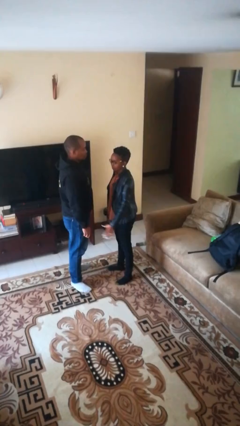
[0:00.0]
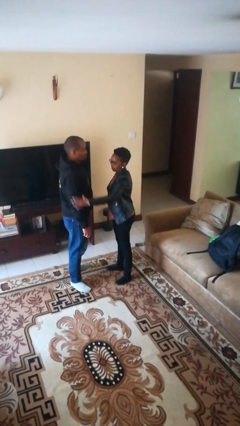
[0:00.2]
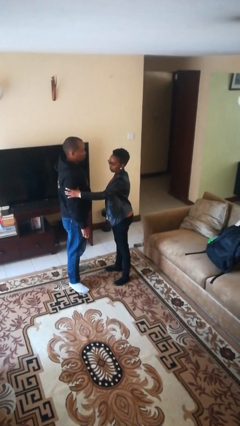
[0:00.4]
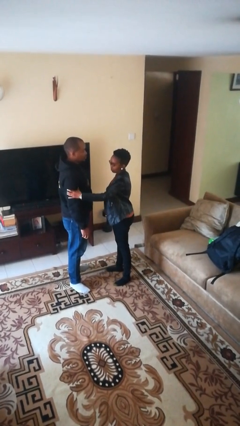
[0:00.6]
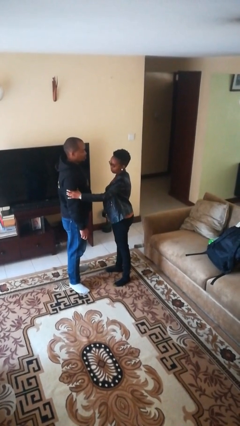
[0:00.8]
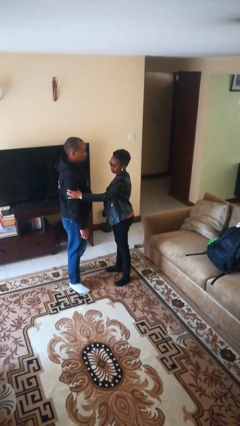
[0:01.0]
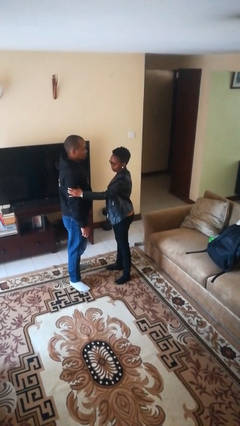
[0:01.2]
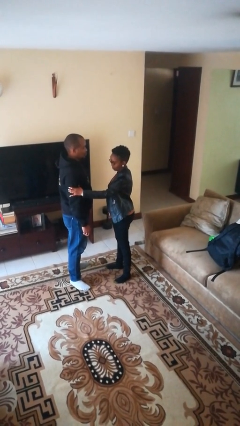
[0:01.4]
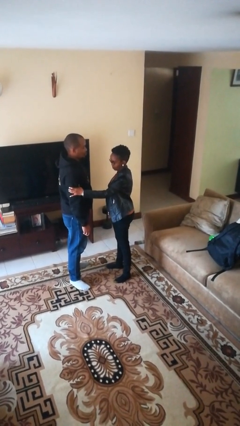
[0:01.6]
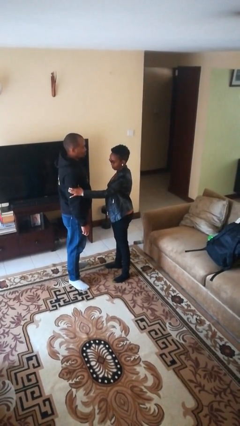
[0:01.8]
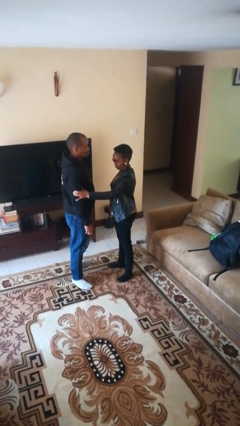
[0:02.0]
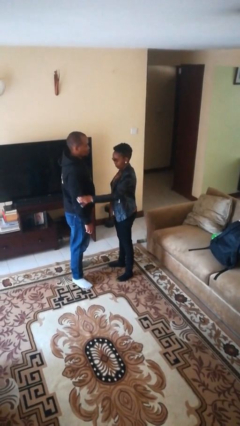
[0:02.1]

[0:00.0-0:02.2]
person grabs person by bicep

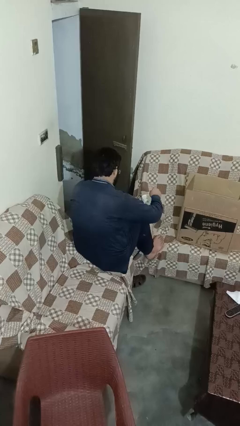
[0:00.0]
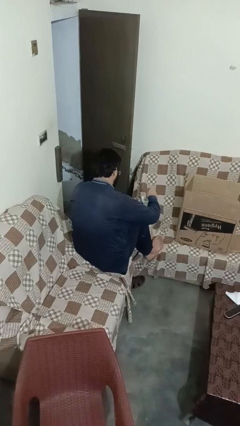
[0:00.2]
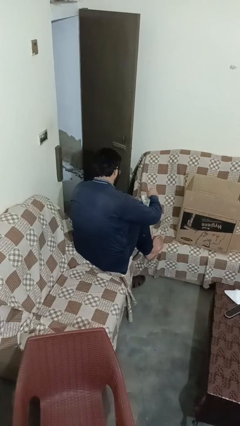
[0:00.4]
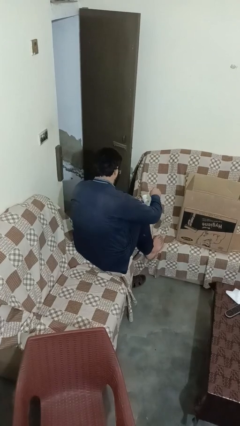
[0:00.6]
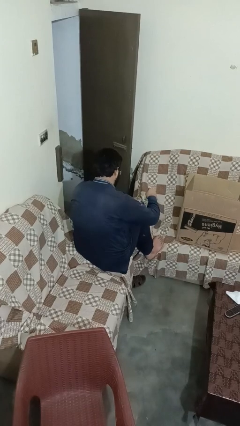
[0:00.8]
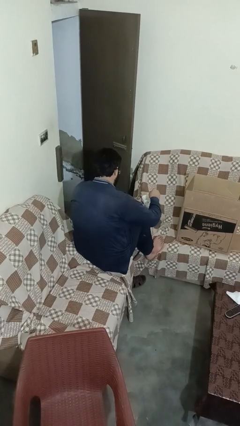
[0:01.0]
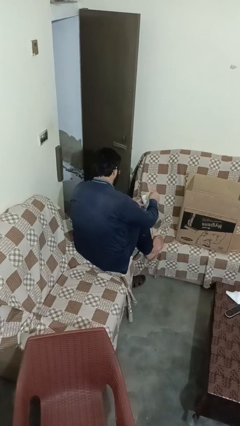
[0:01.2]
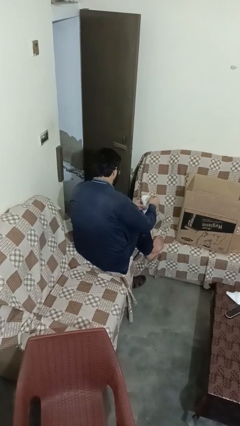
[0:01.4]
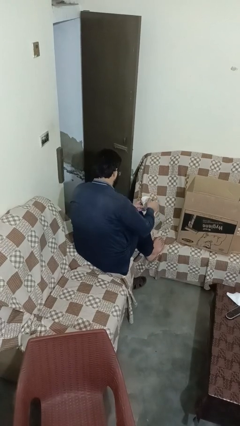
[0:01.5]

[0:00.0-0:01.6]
person stirs mug

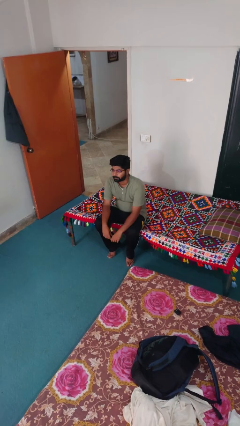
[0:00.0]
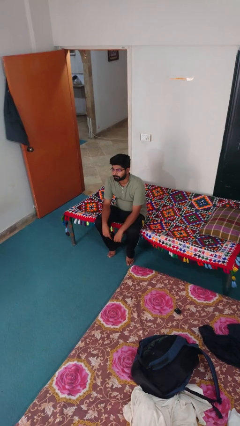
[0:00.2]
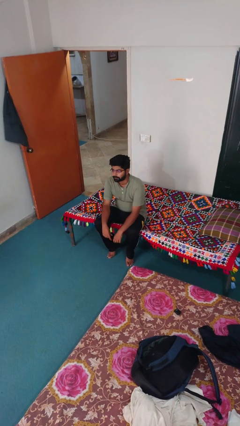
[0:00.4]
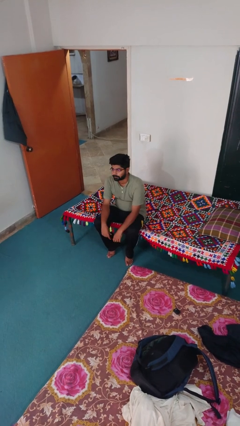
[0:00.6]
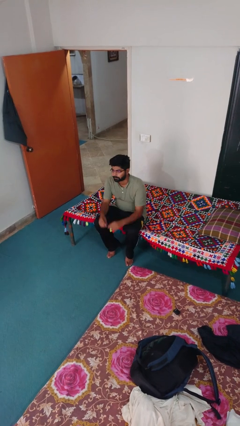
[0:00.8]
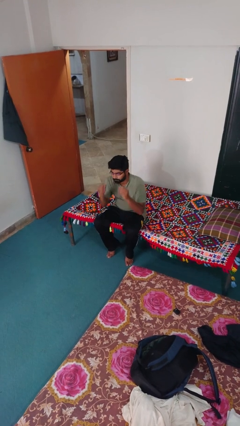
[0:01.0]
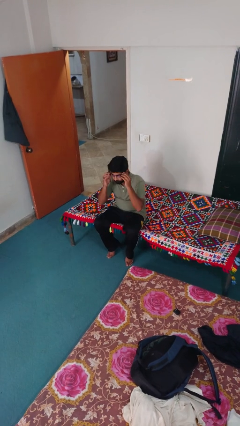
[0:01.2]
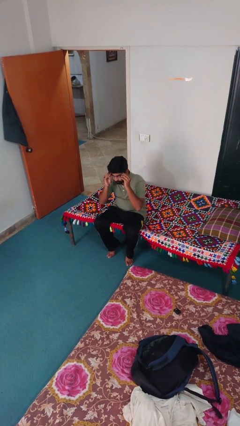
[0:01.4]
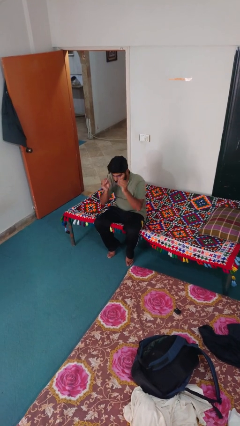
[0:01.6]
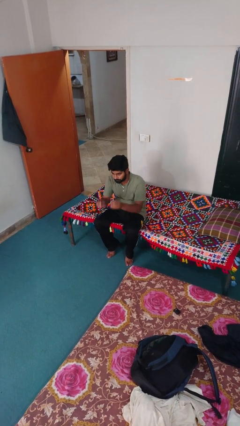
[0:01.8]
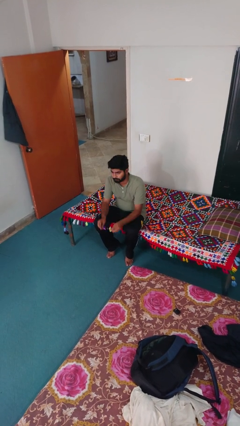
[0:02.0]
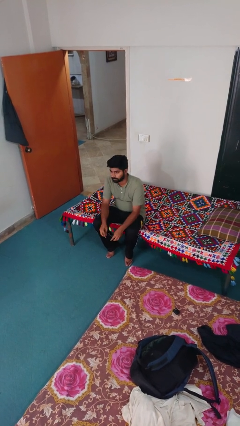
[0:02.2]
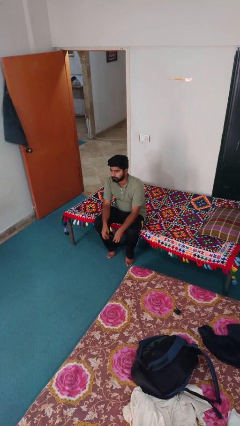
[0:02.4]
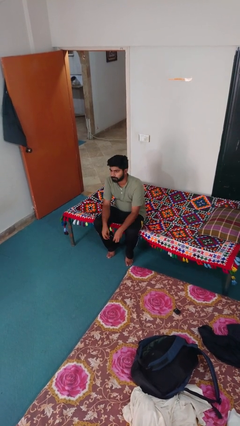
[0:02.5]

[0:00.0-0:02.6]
person takes off glasses

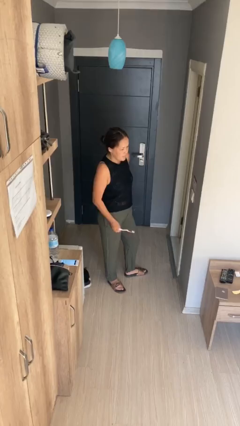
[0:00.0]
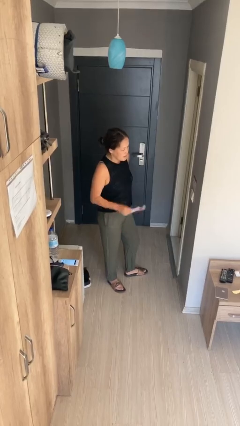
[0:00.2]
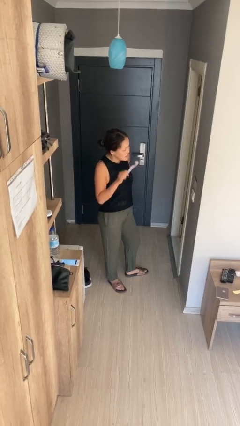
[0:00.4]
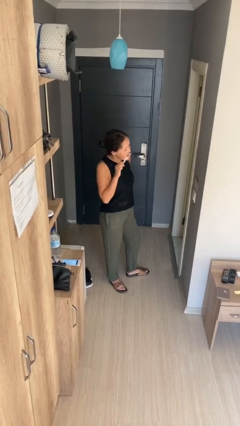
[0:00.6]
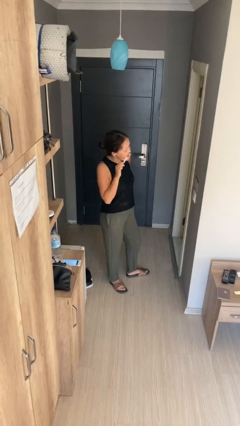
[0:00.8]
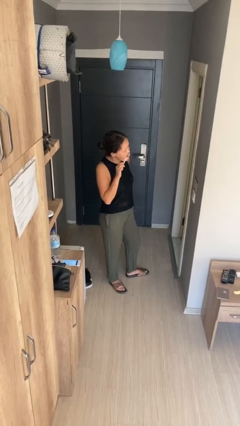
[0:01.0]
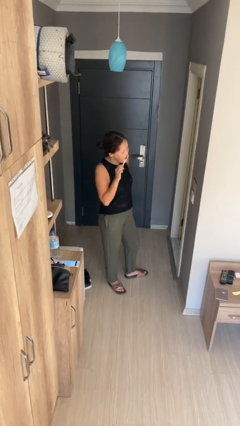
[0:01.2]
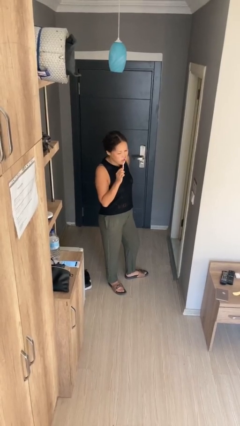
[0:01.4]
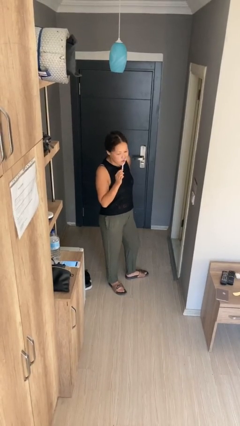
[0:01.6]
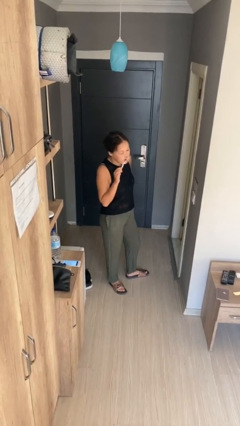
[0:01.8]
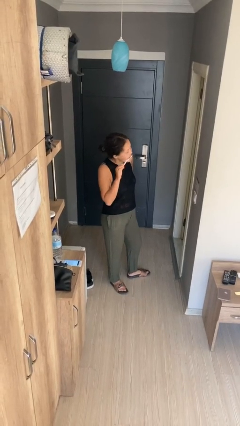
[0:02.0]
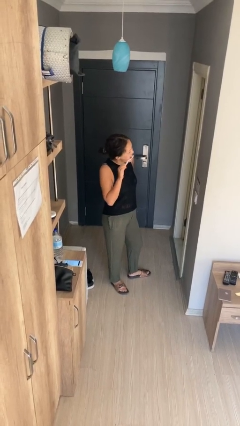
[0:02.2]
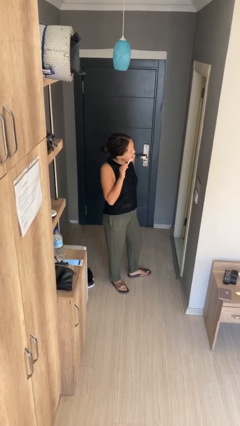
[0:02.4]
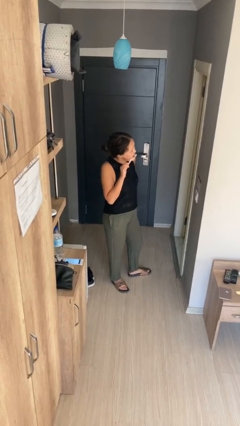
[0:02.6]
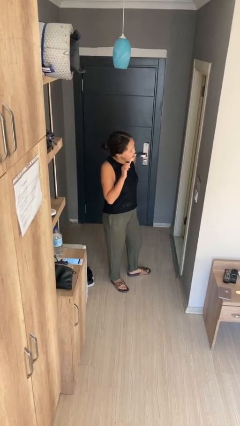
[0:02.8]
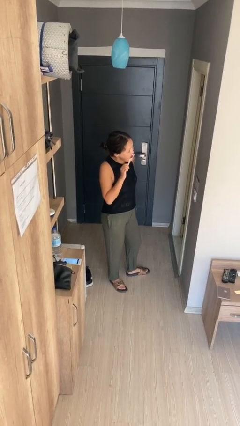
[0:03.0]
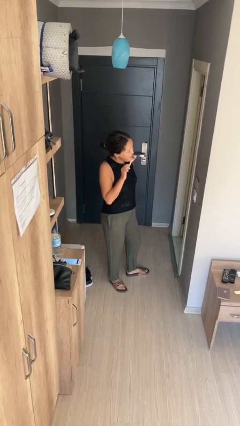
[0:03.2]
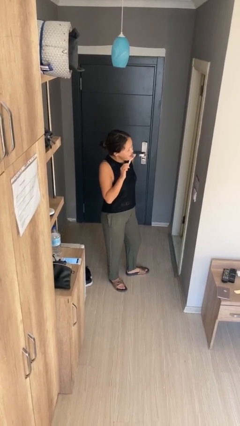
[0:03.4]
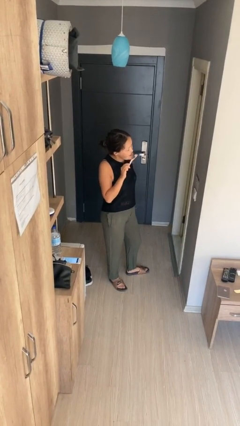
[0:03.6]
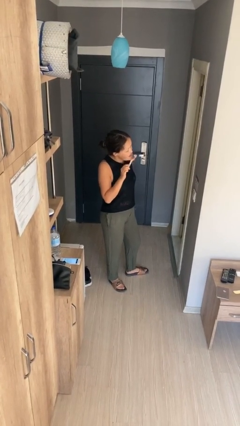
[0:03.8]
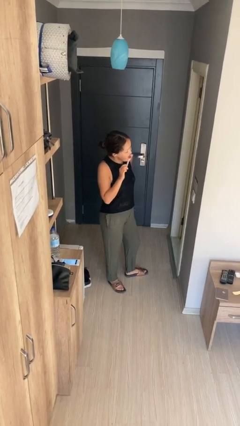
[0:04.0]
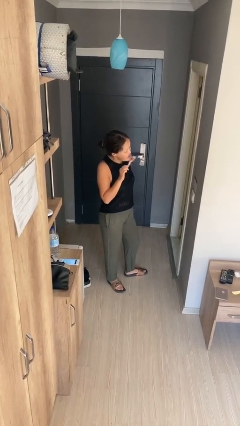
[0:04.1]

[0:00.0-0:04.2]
person brushes teeth

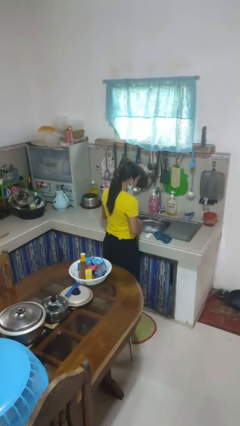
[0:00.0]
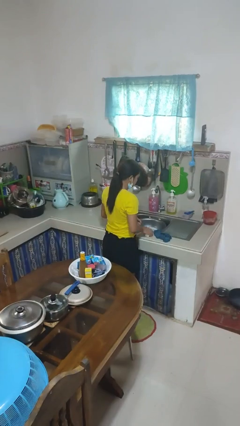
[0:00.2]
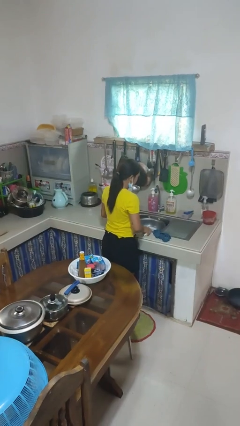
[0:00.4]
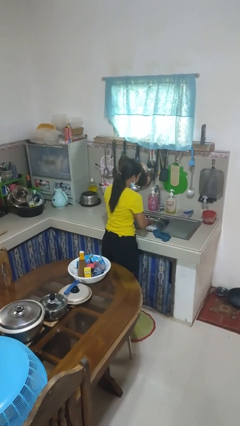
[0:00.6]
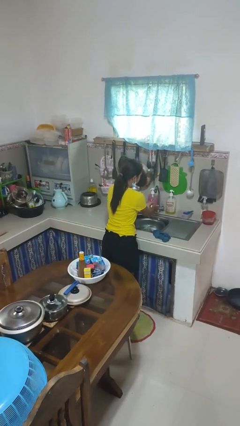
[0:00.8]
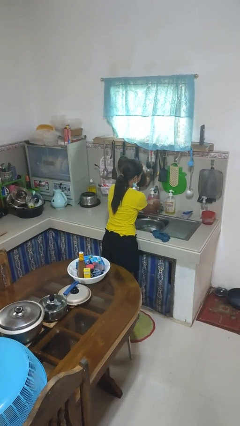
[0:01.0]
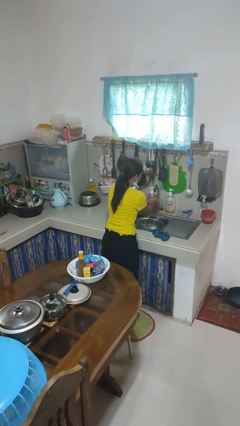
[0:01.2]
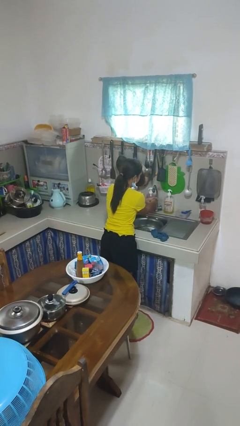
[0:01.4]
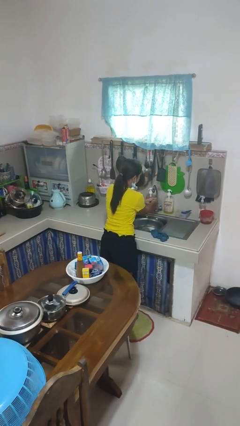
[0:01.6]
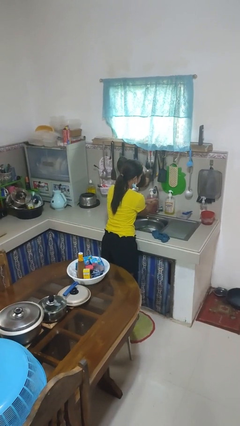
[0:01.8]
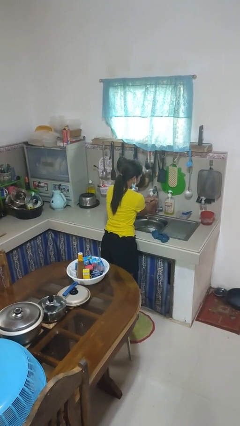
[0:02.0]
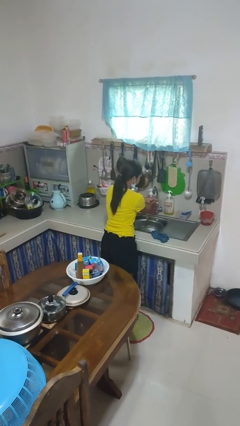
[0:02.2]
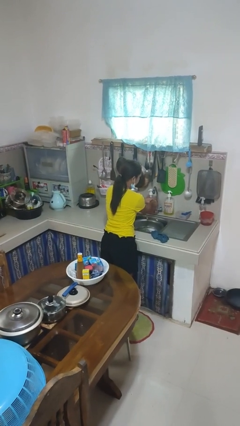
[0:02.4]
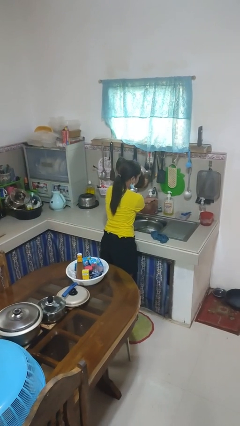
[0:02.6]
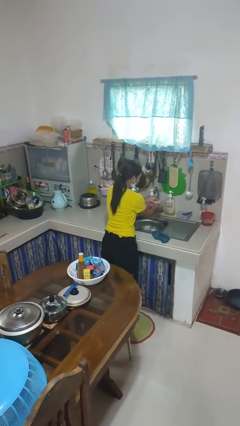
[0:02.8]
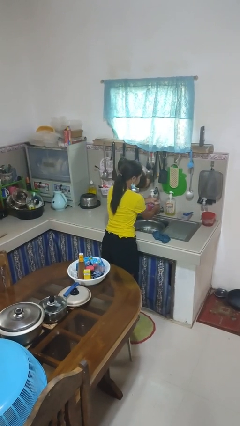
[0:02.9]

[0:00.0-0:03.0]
person washes hands

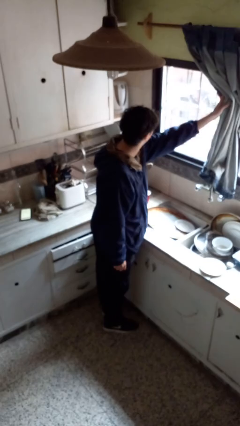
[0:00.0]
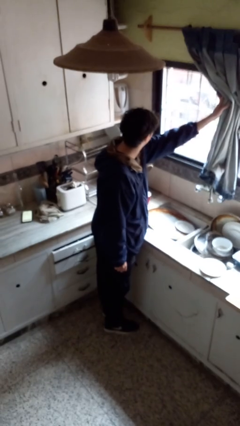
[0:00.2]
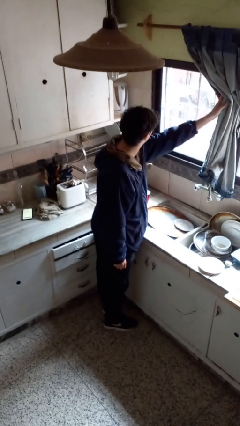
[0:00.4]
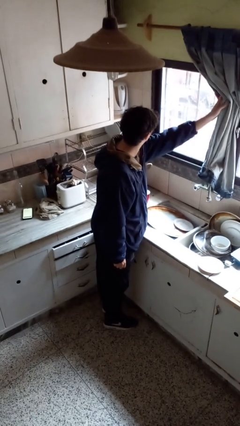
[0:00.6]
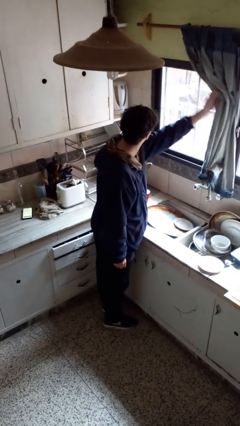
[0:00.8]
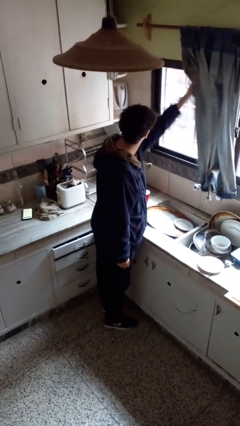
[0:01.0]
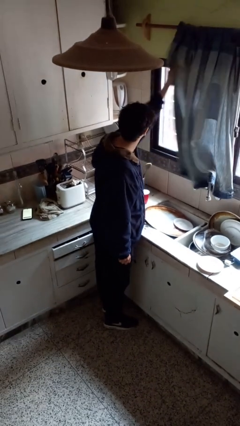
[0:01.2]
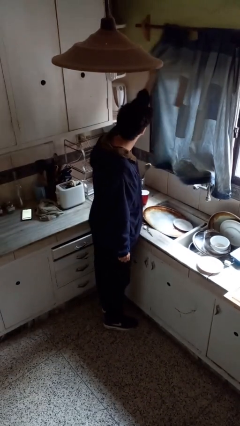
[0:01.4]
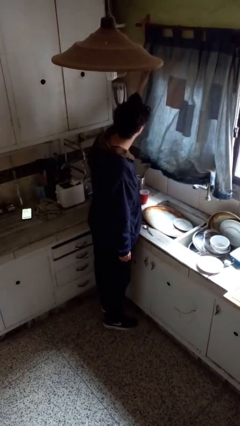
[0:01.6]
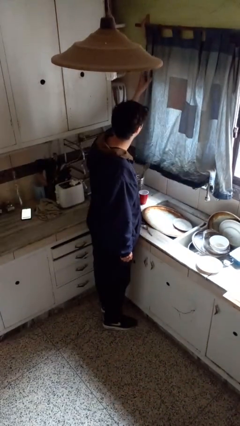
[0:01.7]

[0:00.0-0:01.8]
person closes curtains

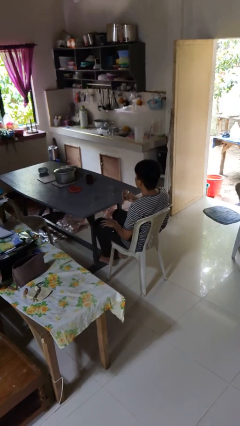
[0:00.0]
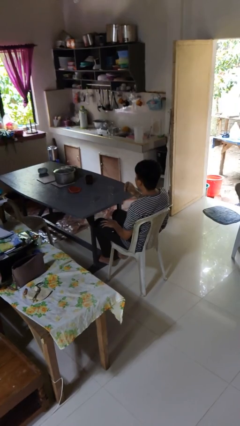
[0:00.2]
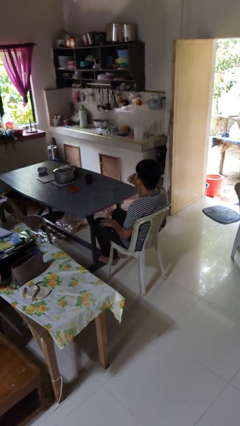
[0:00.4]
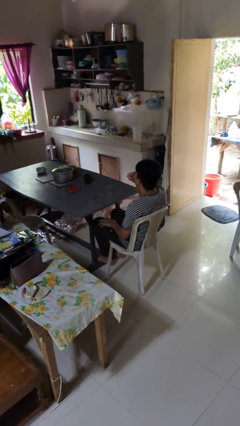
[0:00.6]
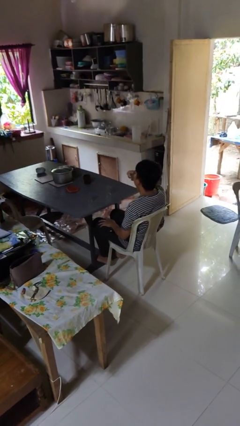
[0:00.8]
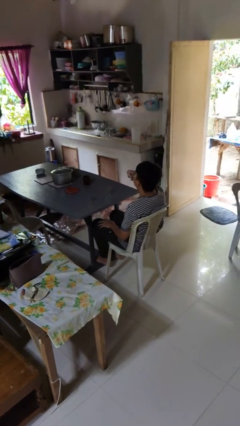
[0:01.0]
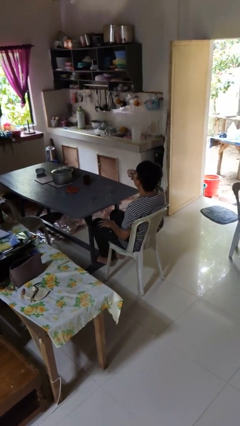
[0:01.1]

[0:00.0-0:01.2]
person drinks from shotglass

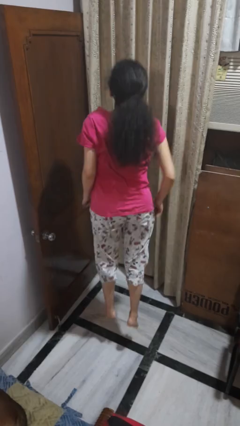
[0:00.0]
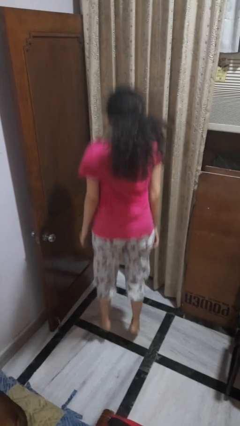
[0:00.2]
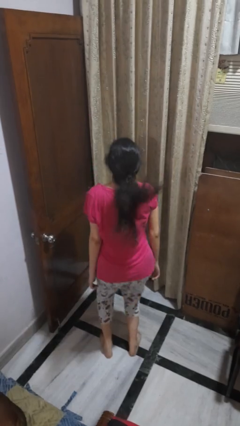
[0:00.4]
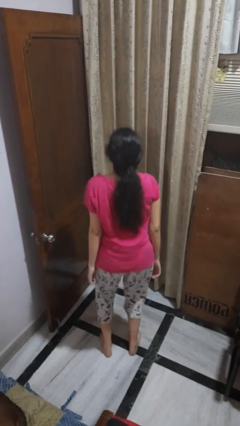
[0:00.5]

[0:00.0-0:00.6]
person jumps
